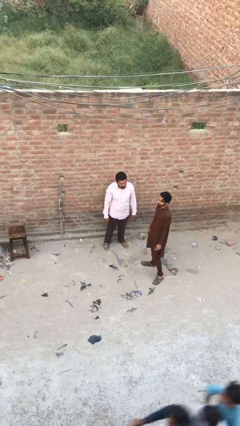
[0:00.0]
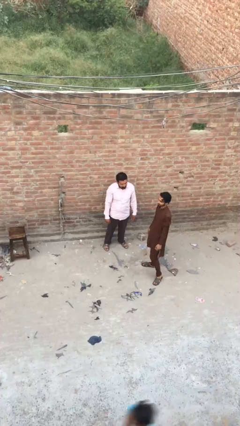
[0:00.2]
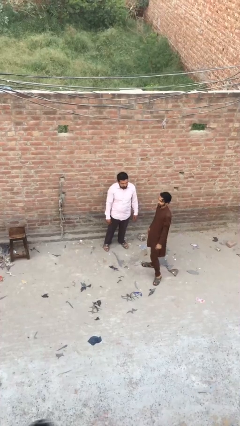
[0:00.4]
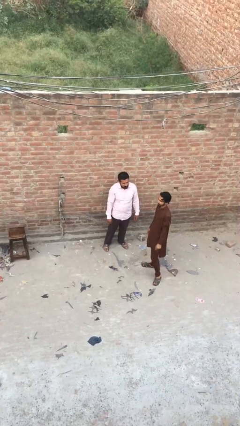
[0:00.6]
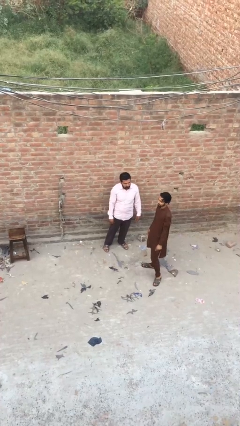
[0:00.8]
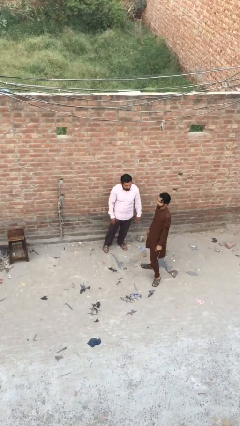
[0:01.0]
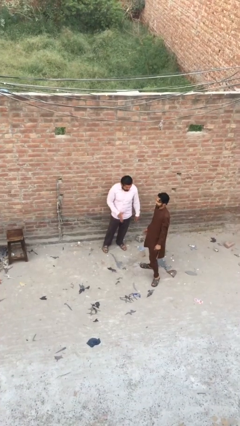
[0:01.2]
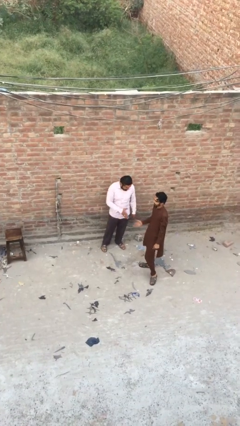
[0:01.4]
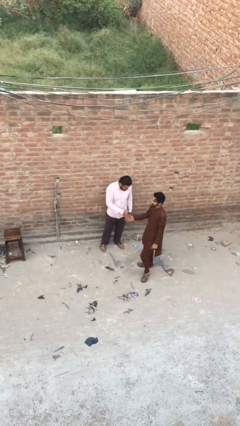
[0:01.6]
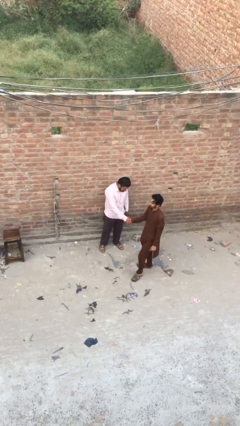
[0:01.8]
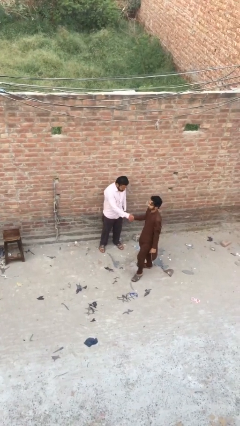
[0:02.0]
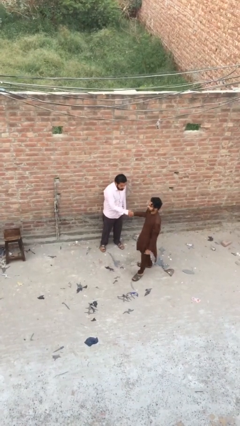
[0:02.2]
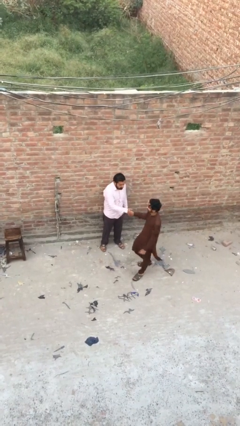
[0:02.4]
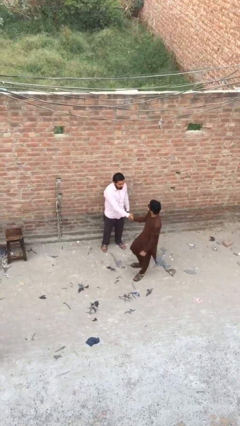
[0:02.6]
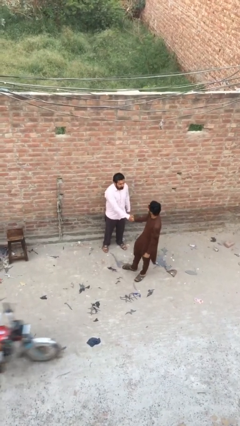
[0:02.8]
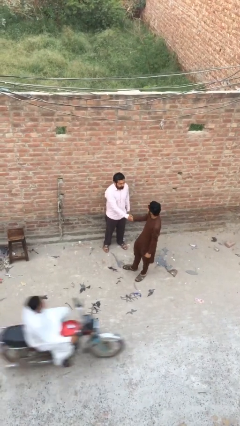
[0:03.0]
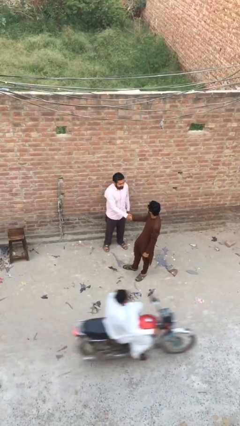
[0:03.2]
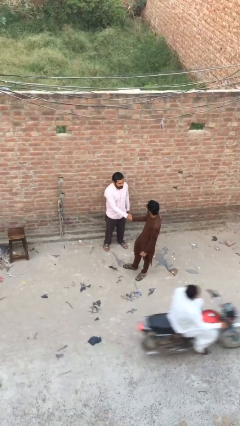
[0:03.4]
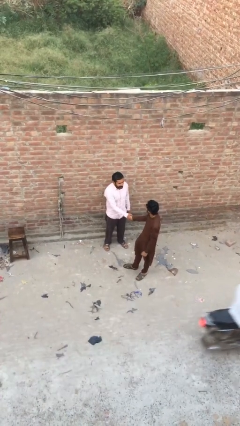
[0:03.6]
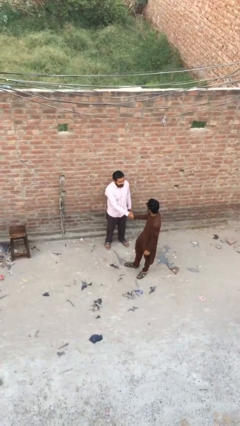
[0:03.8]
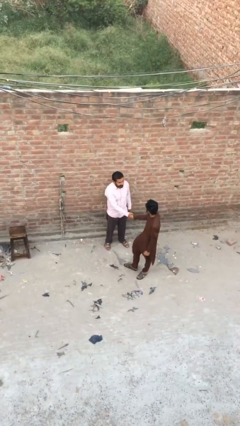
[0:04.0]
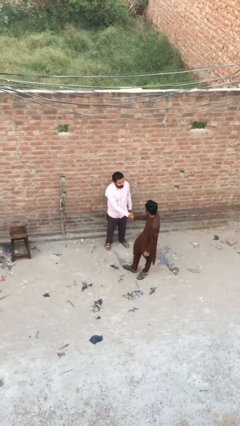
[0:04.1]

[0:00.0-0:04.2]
person shakes hand

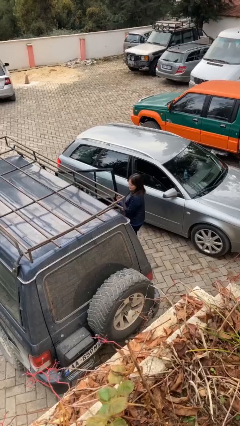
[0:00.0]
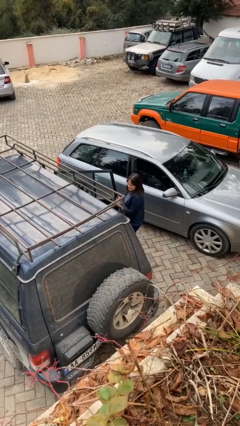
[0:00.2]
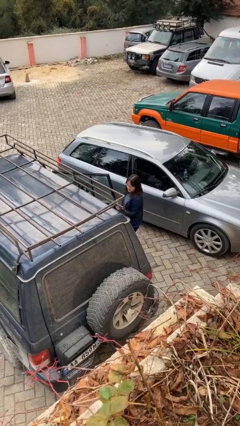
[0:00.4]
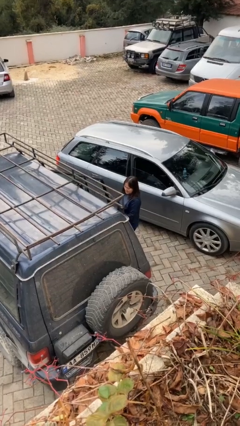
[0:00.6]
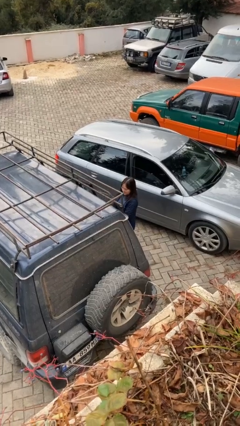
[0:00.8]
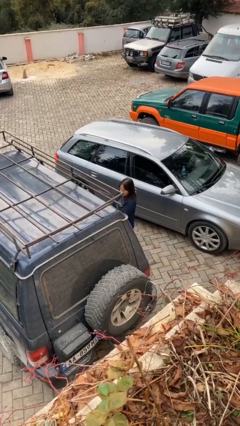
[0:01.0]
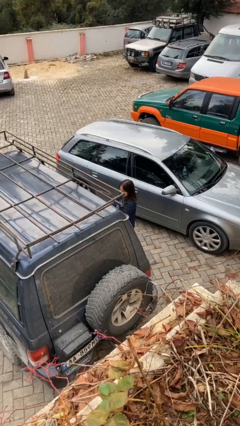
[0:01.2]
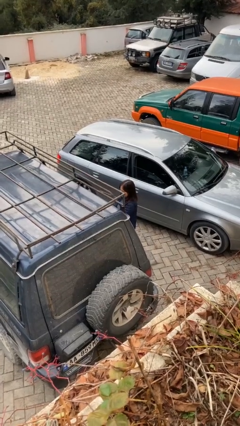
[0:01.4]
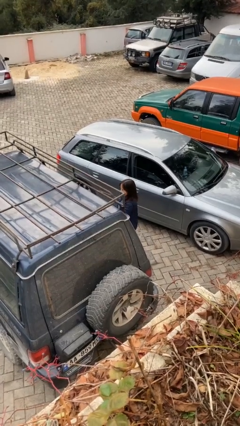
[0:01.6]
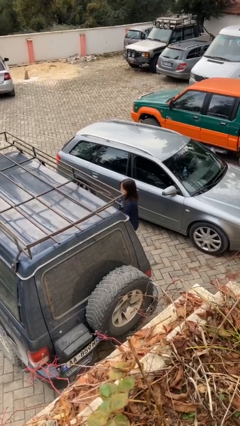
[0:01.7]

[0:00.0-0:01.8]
person closes car door

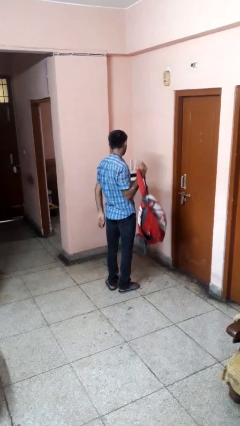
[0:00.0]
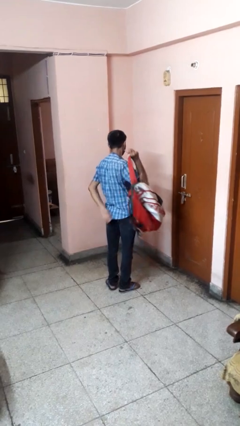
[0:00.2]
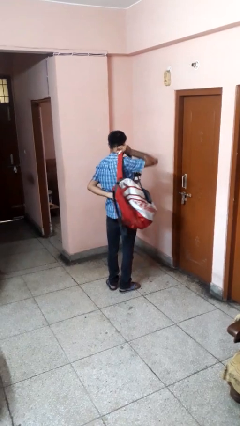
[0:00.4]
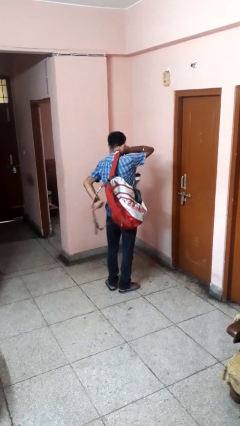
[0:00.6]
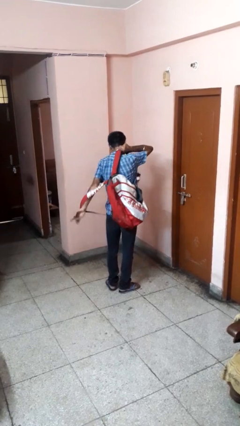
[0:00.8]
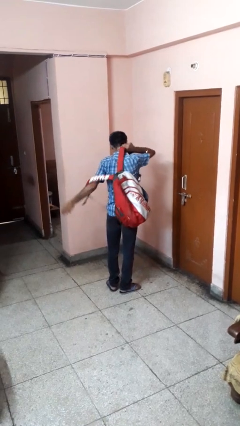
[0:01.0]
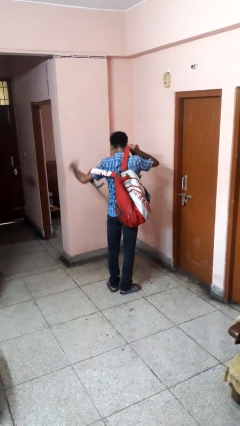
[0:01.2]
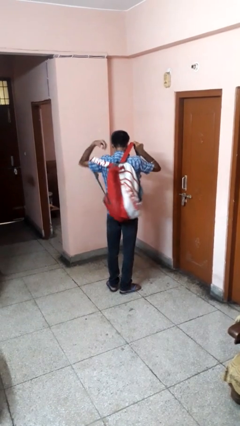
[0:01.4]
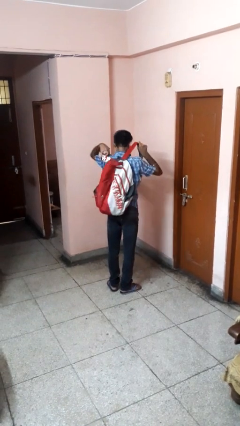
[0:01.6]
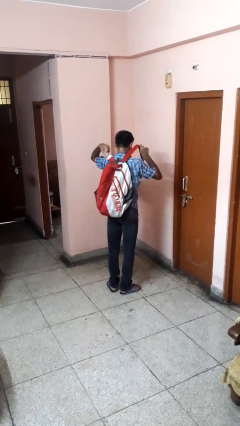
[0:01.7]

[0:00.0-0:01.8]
person puts on backpack

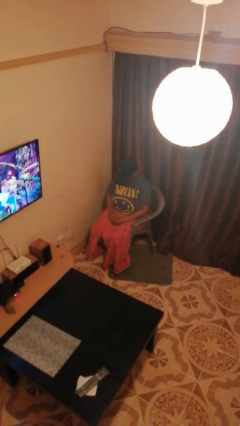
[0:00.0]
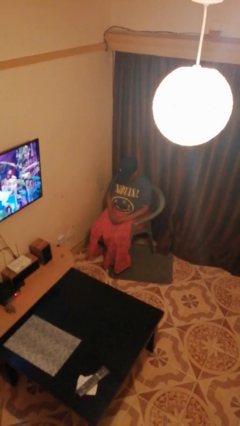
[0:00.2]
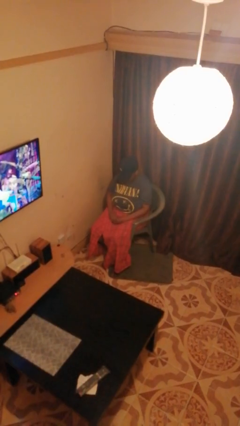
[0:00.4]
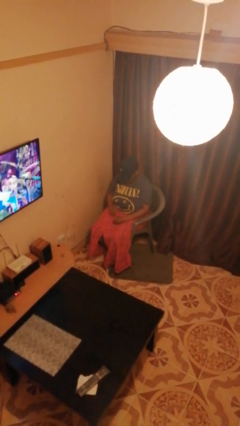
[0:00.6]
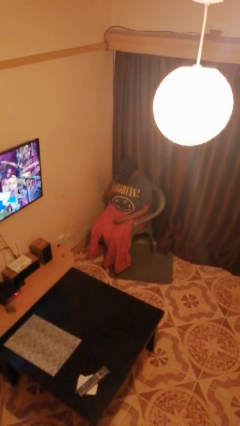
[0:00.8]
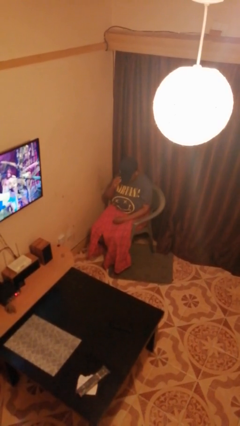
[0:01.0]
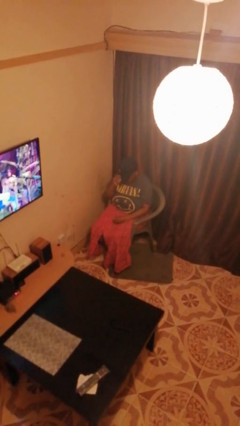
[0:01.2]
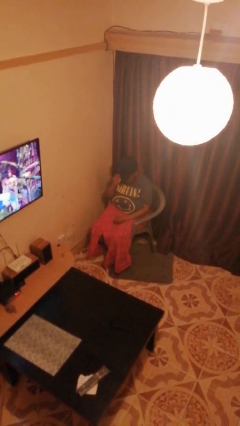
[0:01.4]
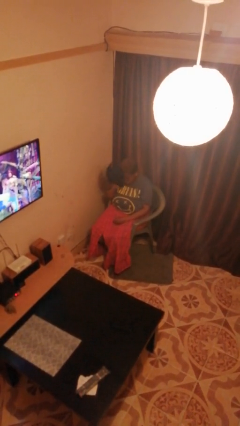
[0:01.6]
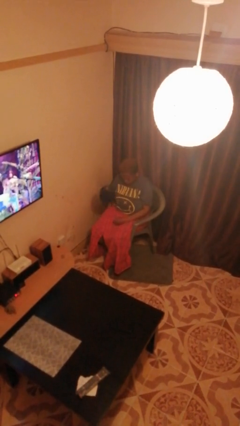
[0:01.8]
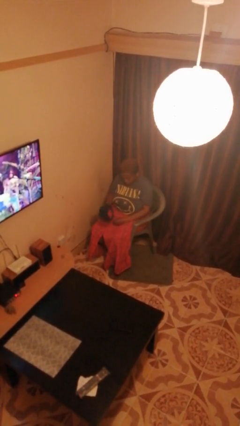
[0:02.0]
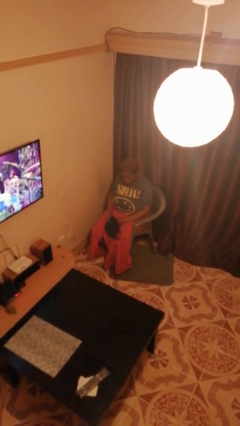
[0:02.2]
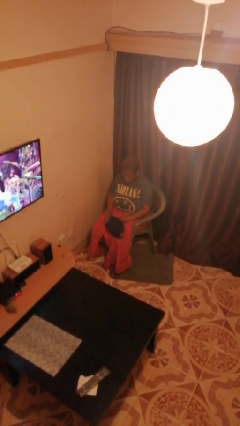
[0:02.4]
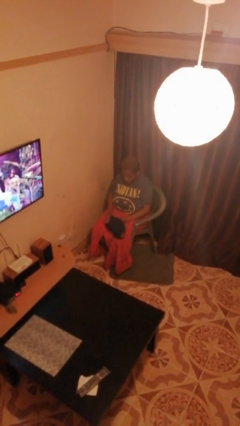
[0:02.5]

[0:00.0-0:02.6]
person takes off hat

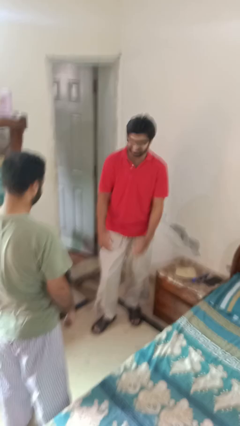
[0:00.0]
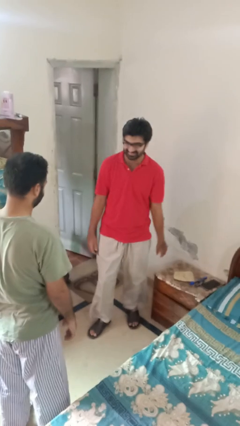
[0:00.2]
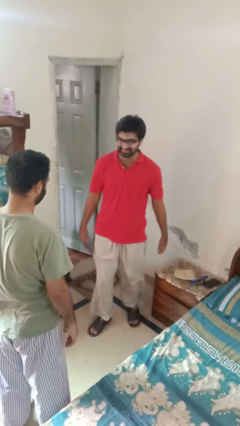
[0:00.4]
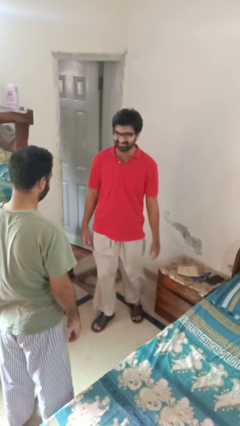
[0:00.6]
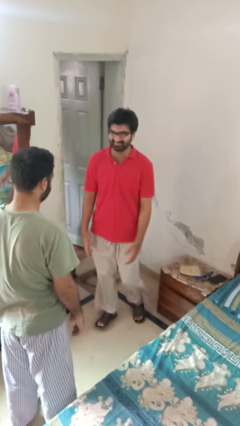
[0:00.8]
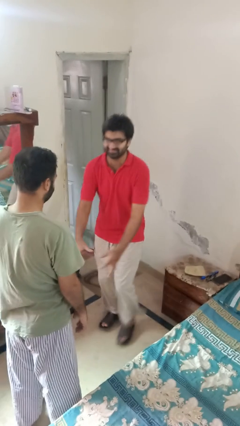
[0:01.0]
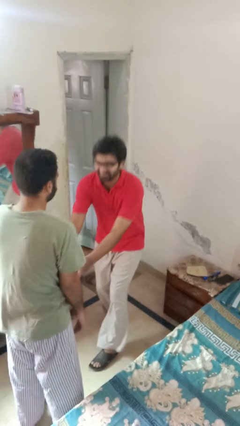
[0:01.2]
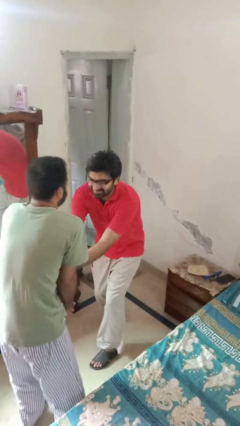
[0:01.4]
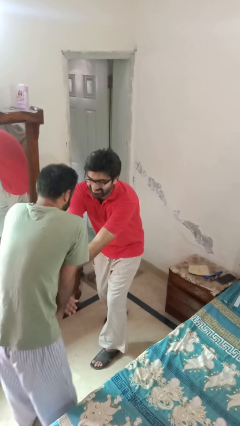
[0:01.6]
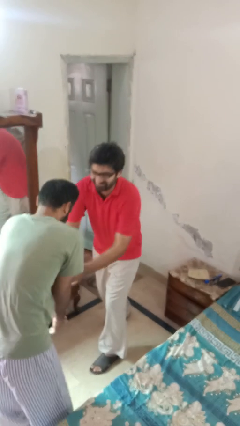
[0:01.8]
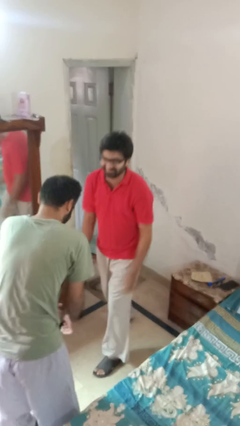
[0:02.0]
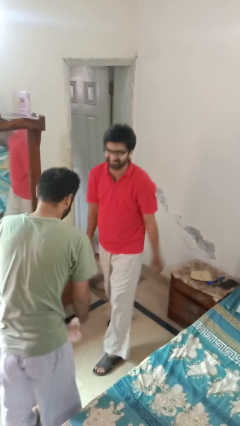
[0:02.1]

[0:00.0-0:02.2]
person tickles person

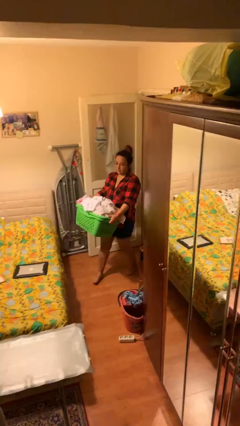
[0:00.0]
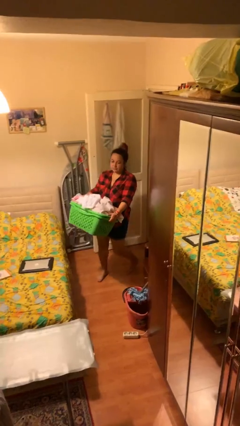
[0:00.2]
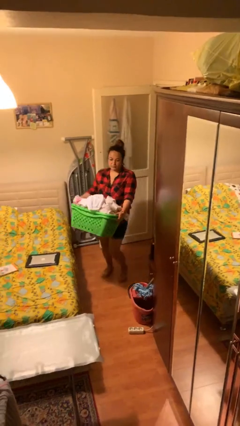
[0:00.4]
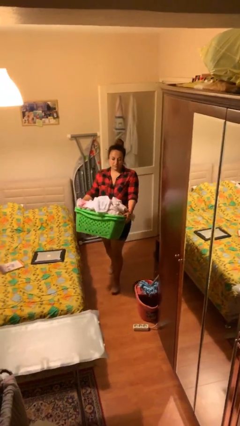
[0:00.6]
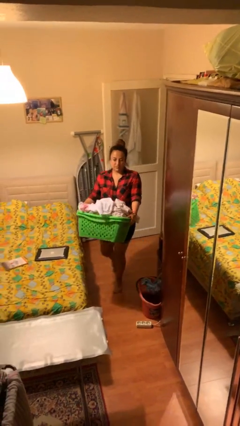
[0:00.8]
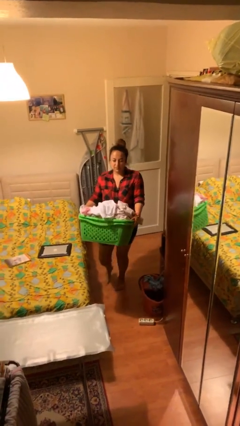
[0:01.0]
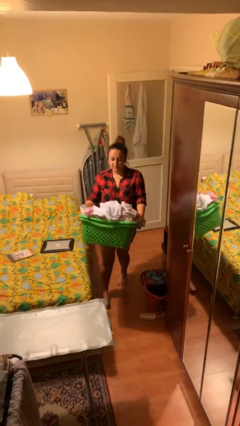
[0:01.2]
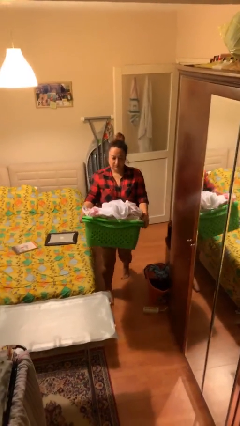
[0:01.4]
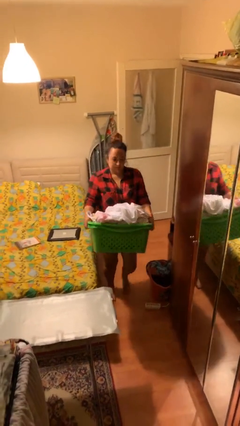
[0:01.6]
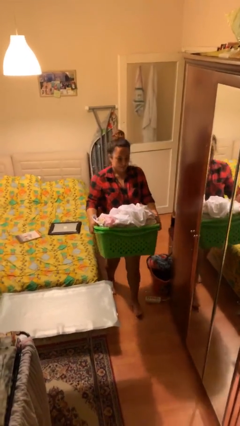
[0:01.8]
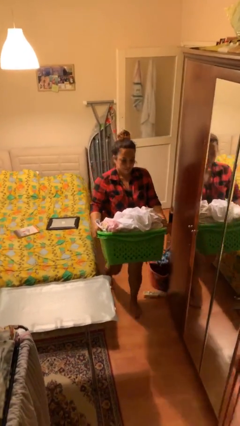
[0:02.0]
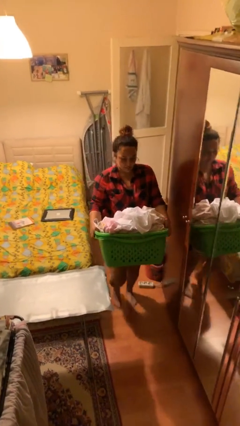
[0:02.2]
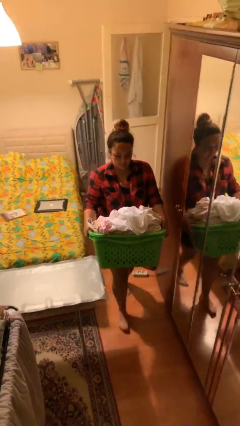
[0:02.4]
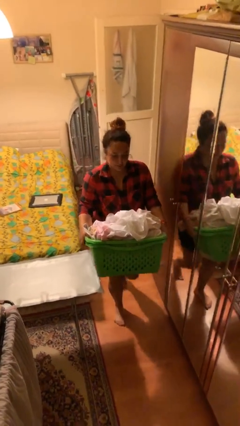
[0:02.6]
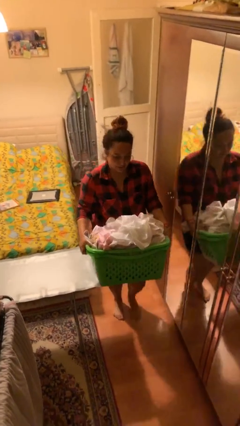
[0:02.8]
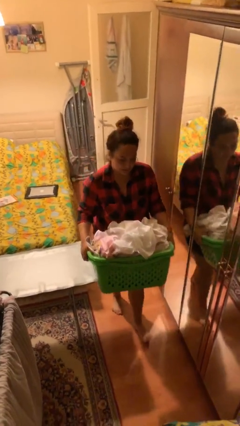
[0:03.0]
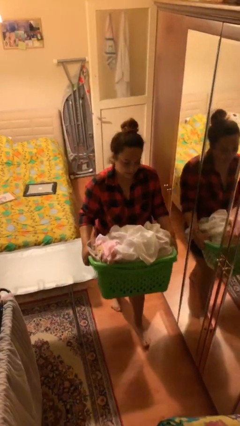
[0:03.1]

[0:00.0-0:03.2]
person carries heavy object

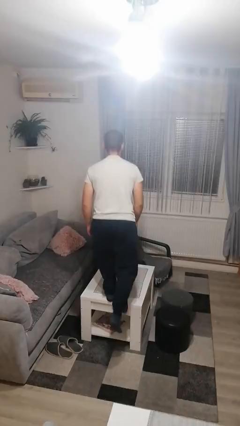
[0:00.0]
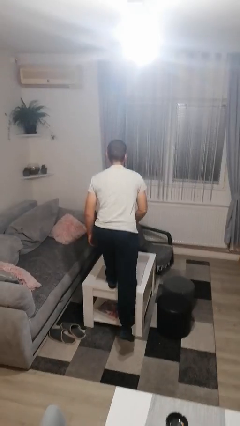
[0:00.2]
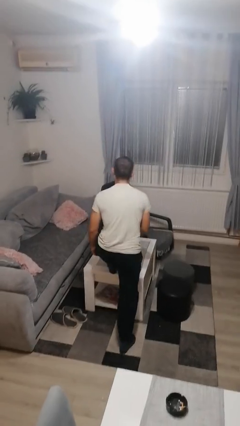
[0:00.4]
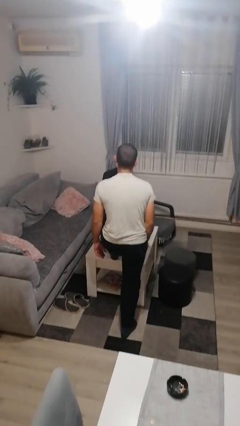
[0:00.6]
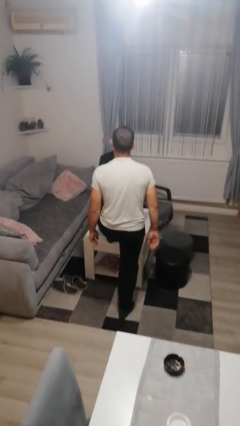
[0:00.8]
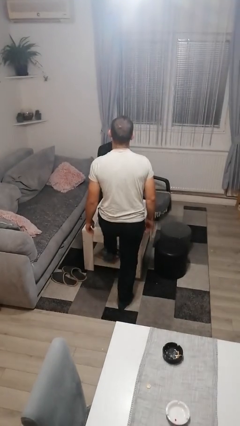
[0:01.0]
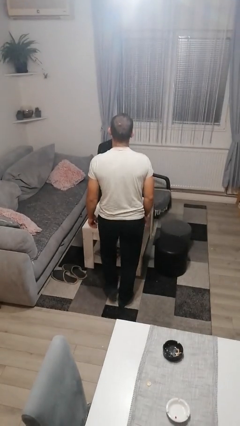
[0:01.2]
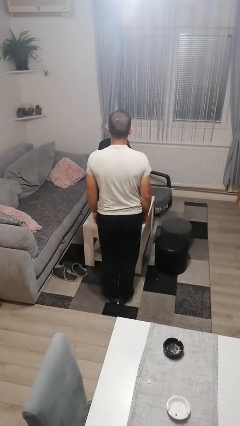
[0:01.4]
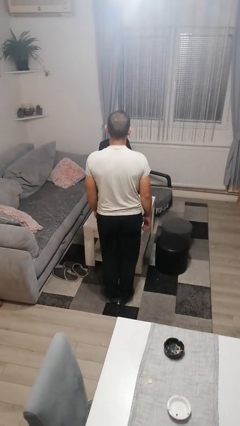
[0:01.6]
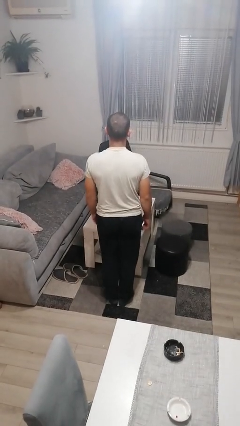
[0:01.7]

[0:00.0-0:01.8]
person climbs off table
